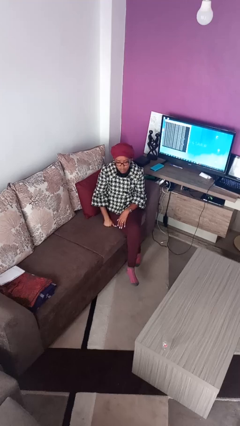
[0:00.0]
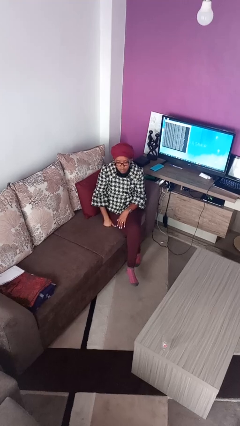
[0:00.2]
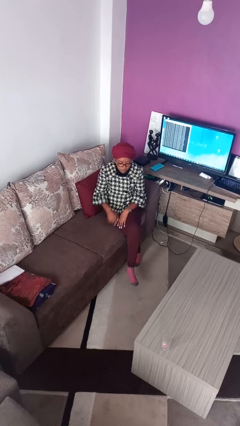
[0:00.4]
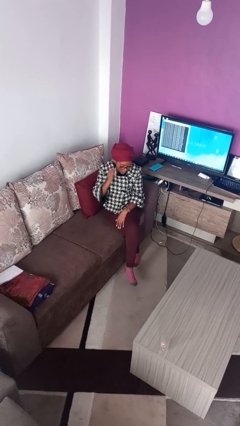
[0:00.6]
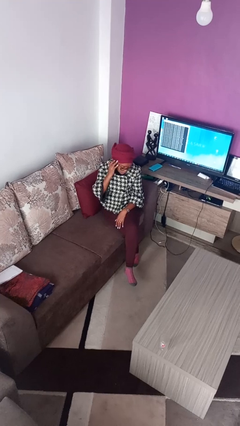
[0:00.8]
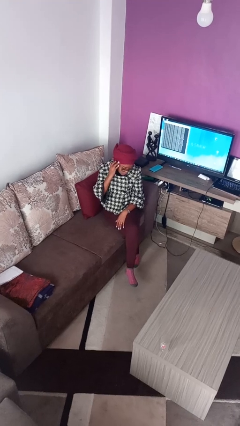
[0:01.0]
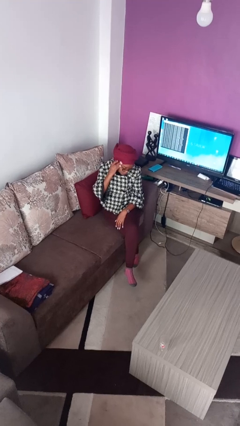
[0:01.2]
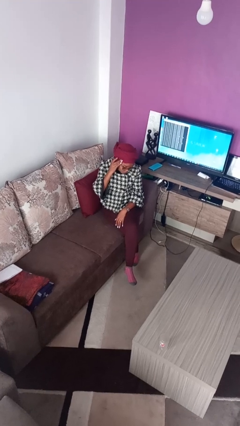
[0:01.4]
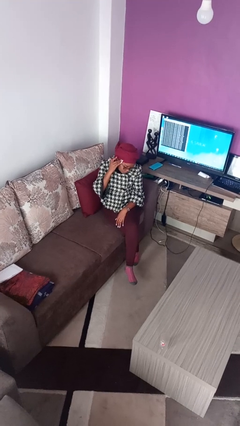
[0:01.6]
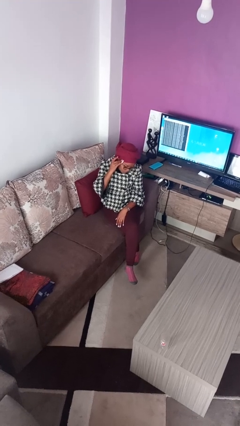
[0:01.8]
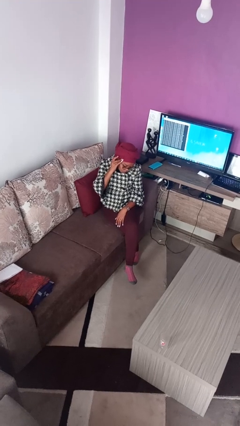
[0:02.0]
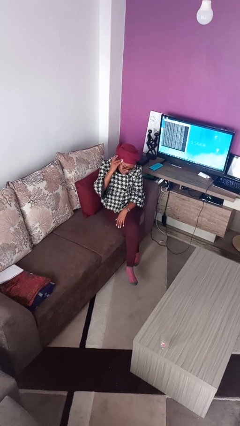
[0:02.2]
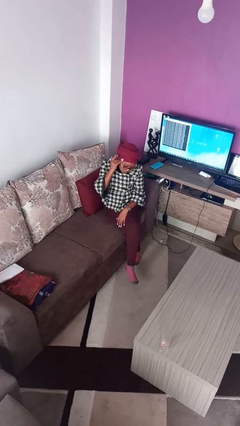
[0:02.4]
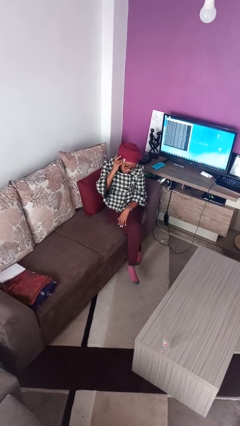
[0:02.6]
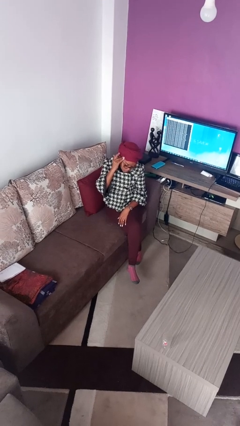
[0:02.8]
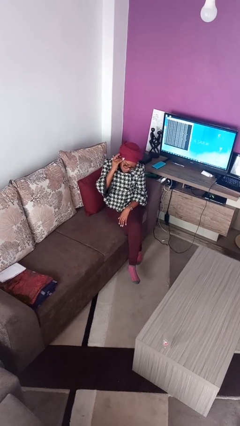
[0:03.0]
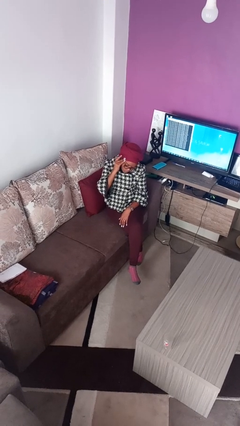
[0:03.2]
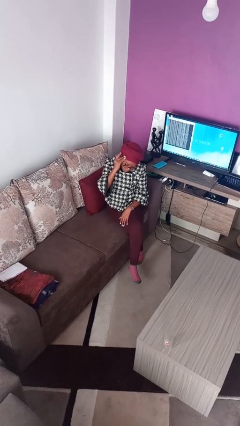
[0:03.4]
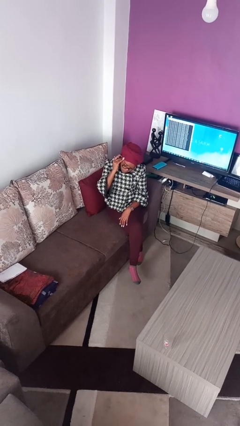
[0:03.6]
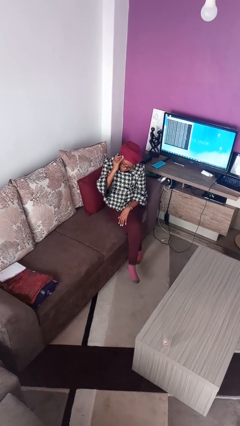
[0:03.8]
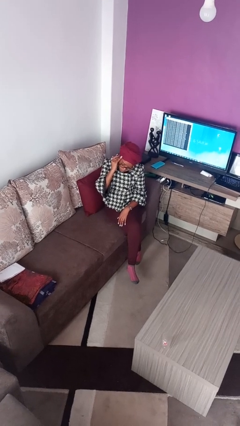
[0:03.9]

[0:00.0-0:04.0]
person scratches face

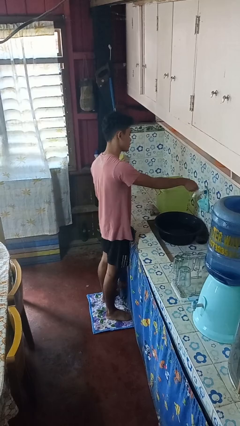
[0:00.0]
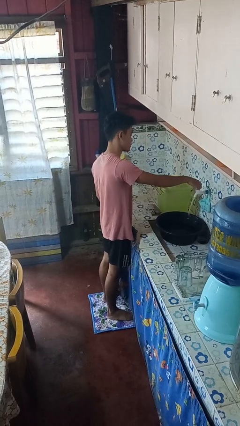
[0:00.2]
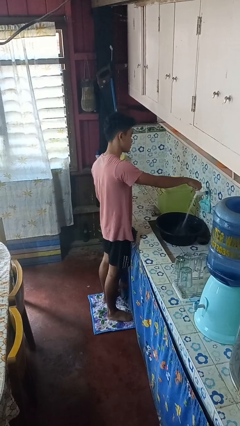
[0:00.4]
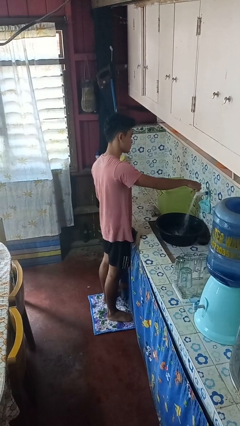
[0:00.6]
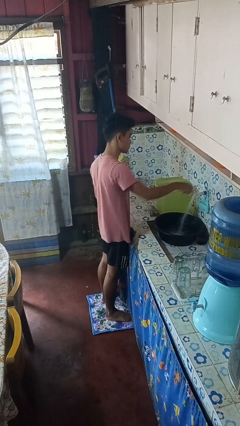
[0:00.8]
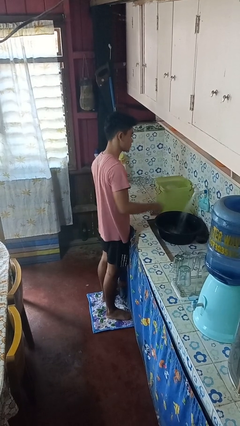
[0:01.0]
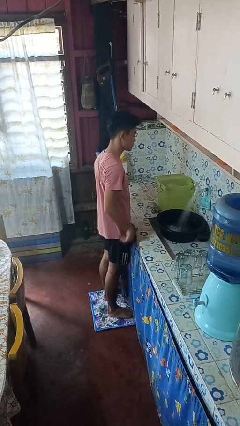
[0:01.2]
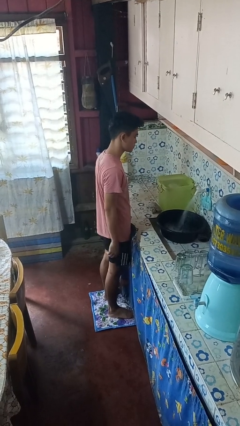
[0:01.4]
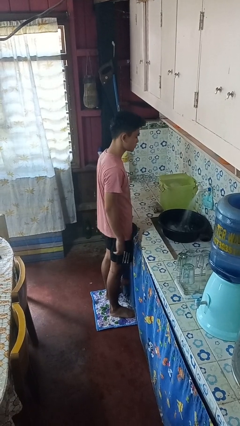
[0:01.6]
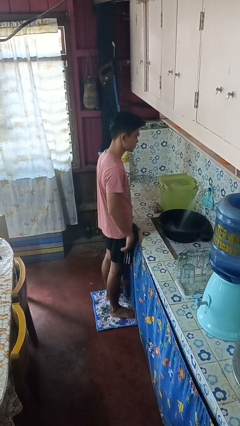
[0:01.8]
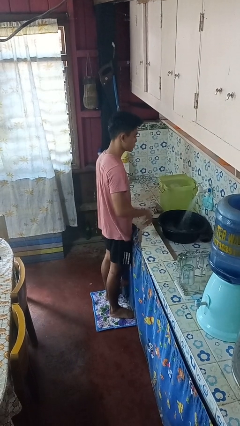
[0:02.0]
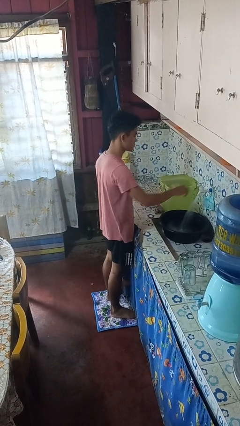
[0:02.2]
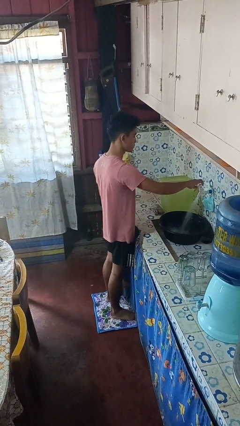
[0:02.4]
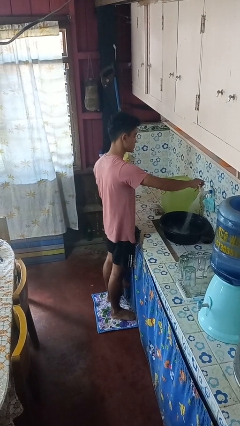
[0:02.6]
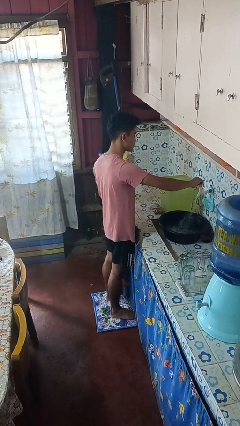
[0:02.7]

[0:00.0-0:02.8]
person turns on faucet

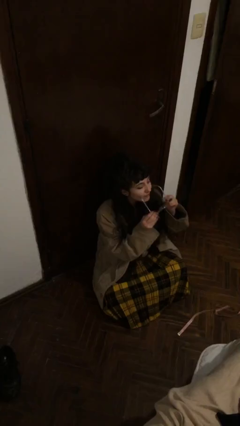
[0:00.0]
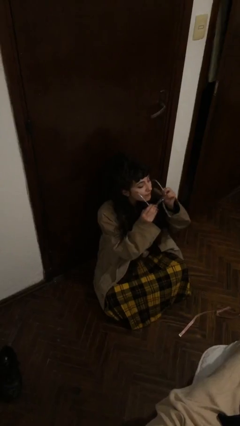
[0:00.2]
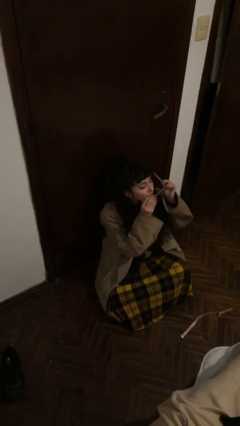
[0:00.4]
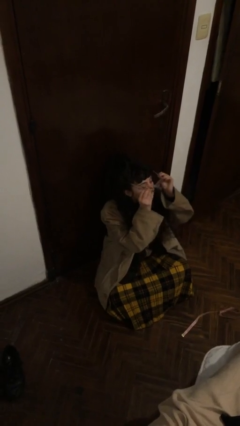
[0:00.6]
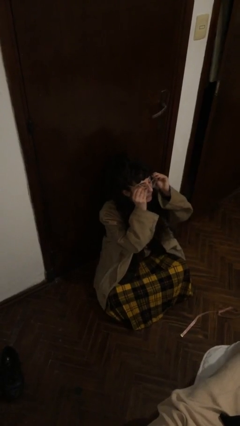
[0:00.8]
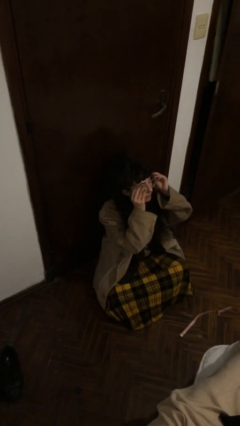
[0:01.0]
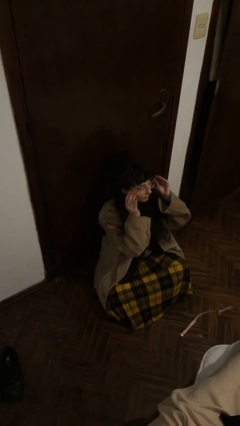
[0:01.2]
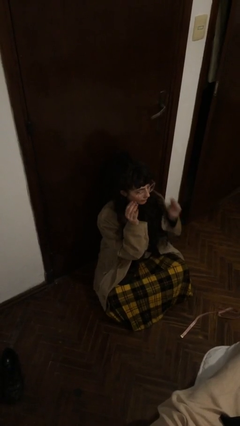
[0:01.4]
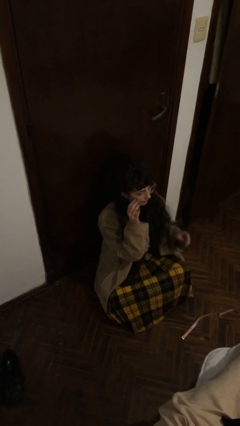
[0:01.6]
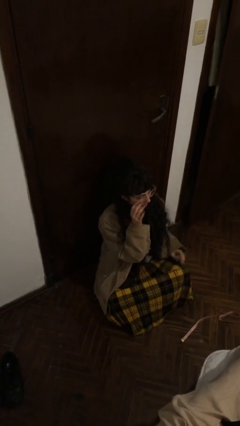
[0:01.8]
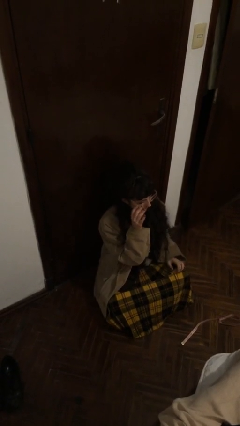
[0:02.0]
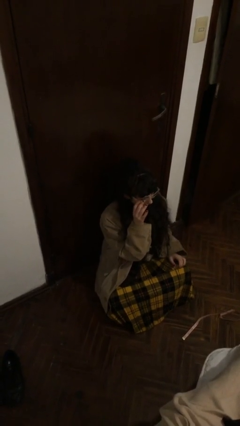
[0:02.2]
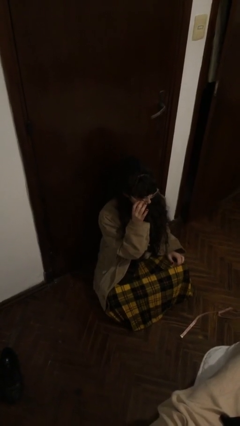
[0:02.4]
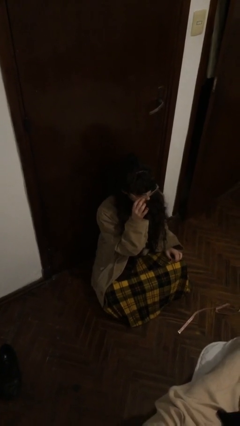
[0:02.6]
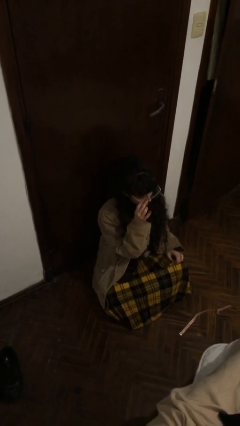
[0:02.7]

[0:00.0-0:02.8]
person puts on glasses

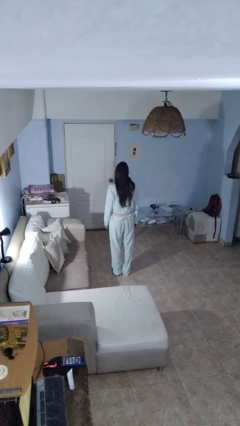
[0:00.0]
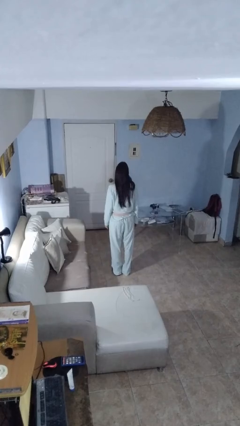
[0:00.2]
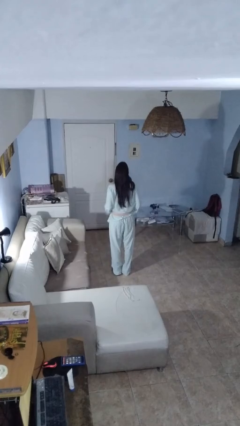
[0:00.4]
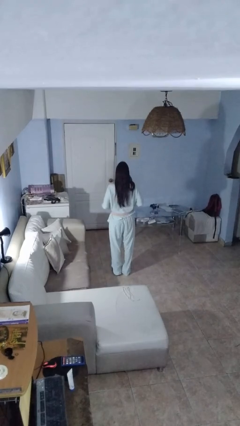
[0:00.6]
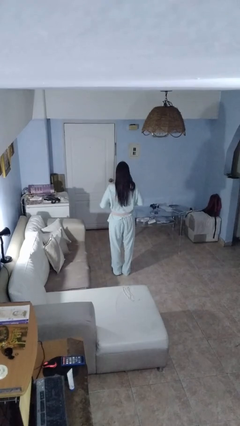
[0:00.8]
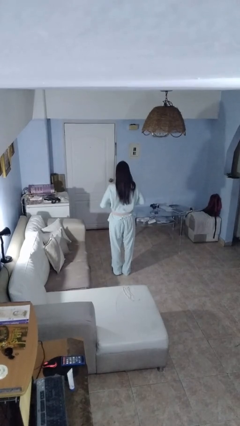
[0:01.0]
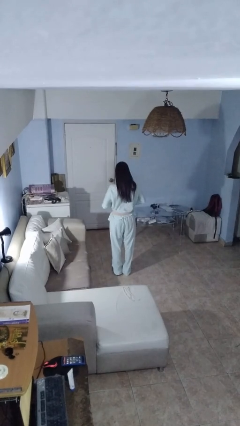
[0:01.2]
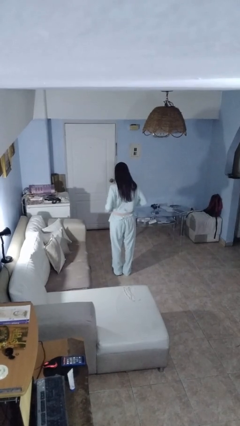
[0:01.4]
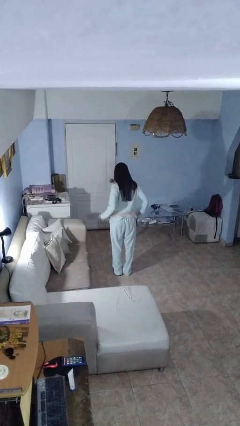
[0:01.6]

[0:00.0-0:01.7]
person takes off belt

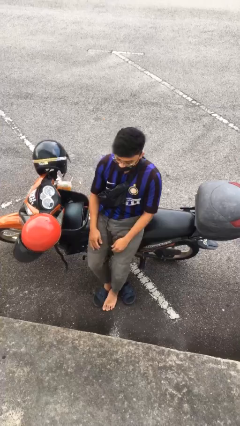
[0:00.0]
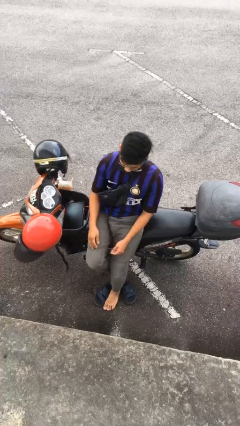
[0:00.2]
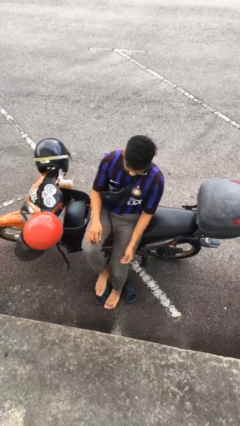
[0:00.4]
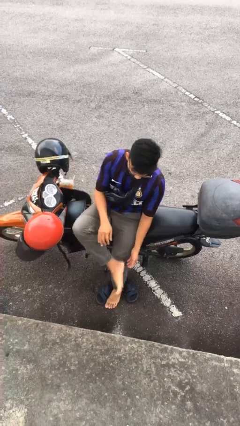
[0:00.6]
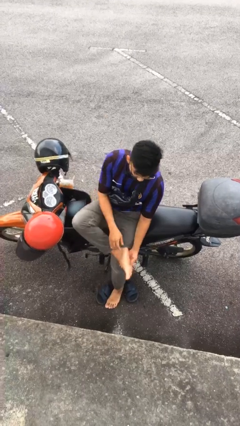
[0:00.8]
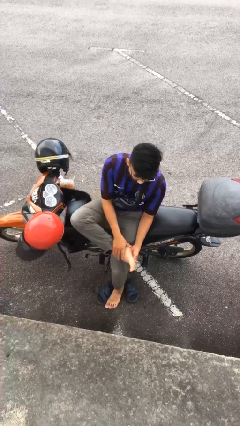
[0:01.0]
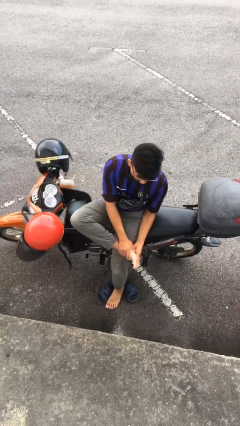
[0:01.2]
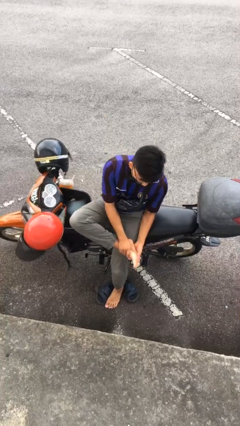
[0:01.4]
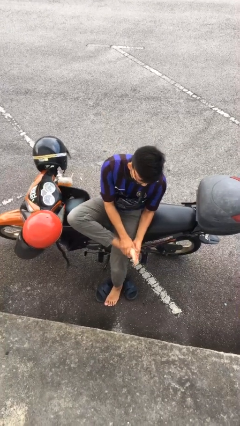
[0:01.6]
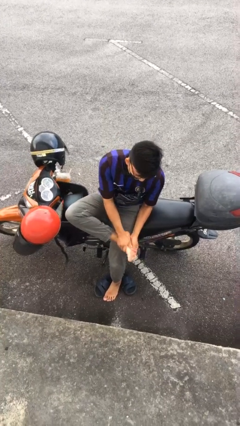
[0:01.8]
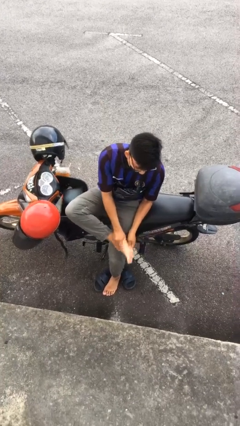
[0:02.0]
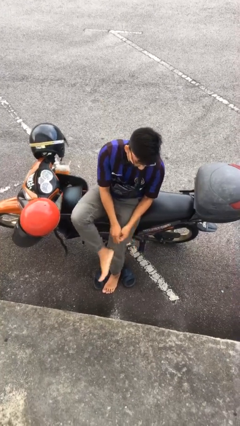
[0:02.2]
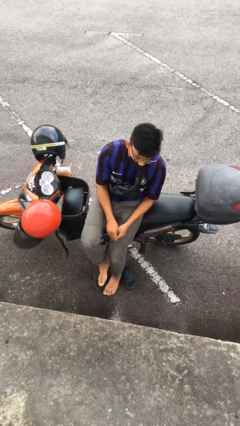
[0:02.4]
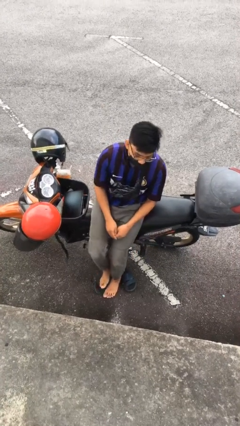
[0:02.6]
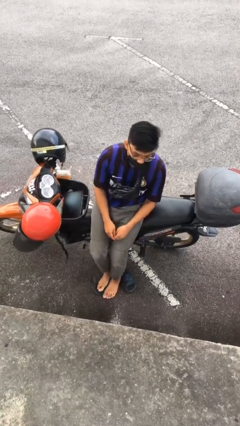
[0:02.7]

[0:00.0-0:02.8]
person rubs foot

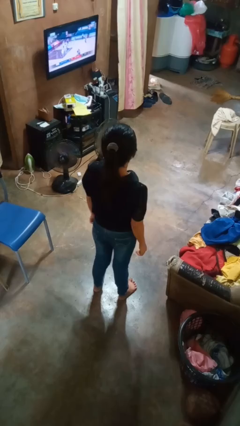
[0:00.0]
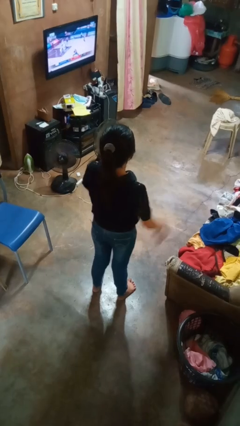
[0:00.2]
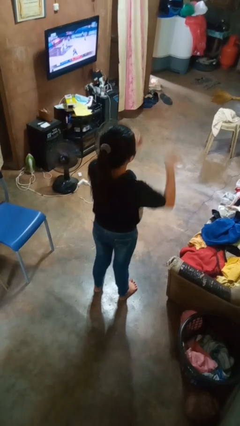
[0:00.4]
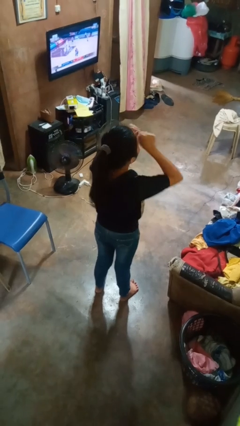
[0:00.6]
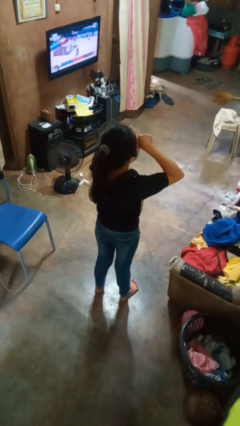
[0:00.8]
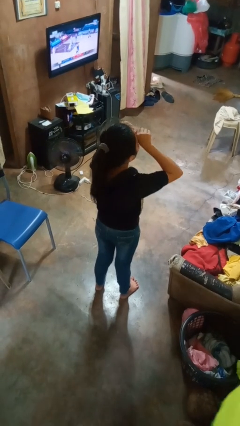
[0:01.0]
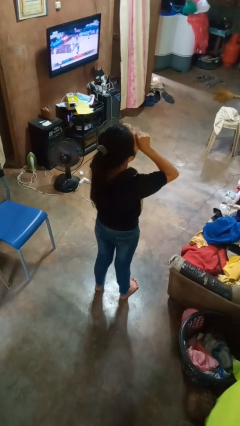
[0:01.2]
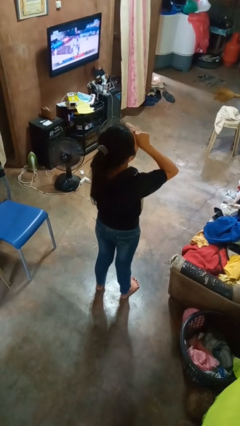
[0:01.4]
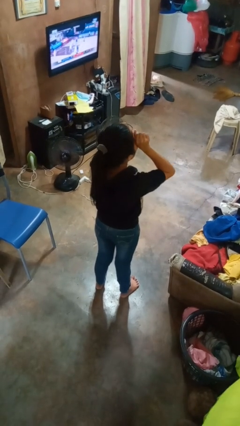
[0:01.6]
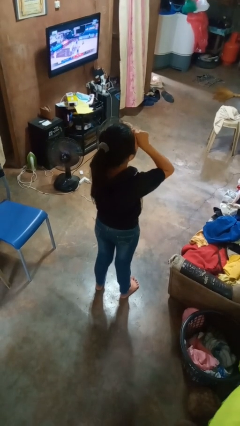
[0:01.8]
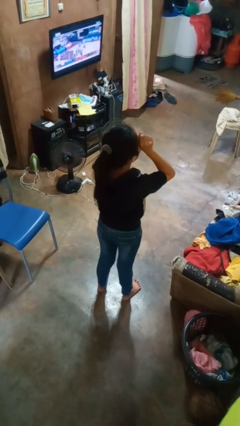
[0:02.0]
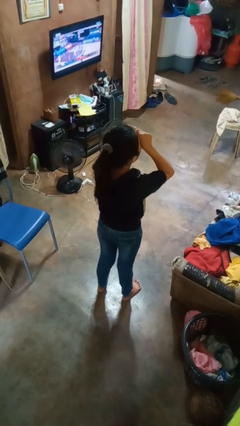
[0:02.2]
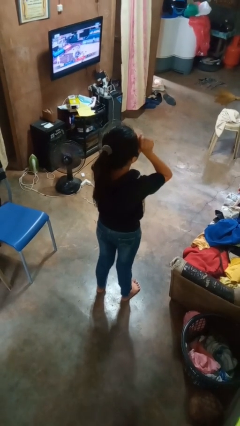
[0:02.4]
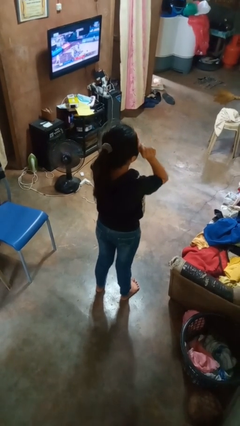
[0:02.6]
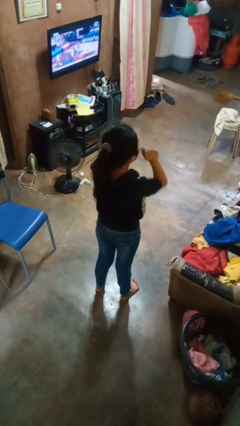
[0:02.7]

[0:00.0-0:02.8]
person rubs eyes
